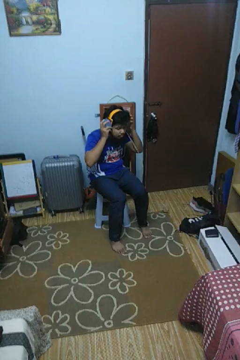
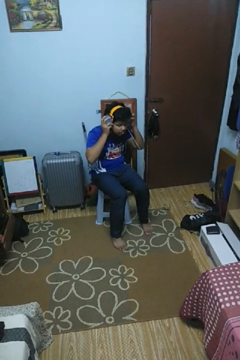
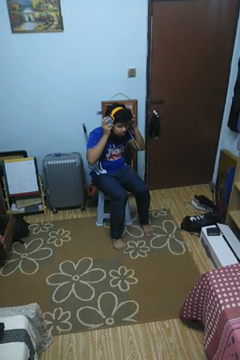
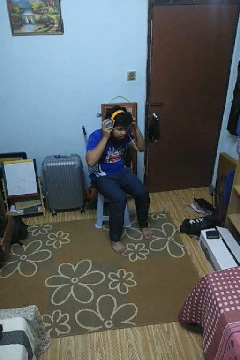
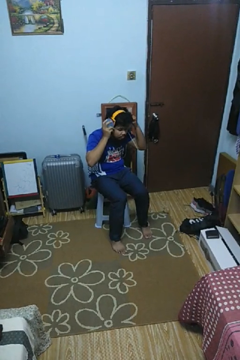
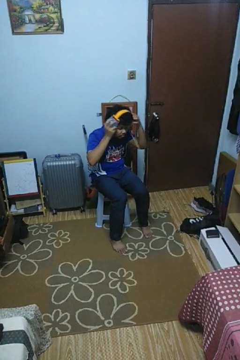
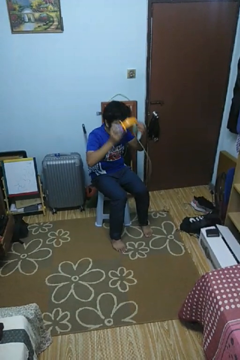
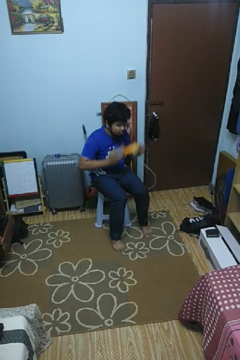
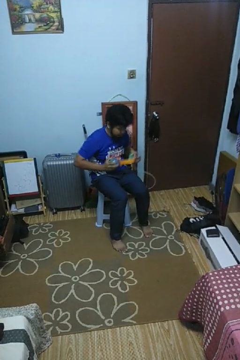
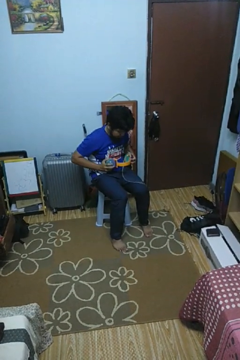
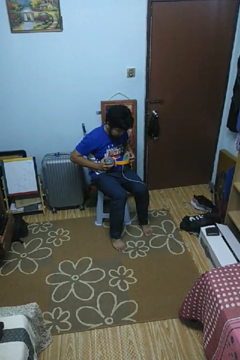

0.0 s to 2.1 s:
person takes off headphones

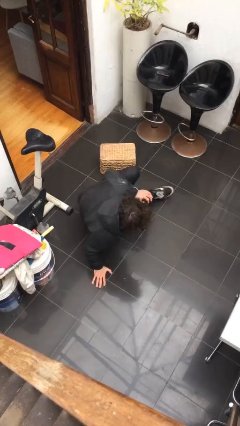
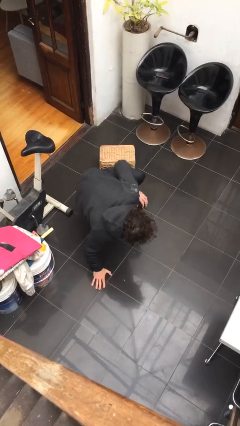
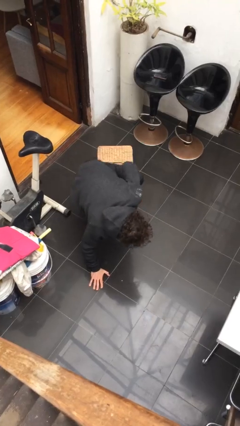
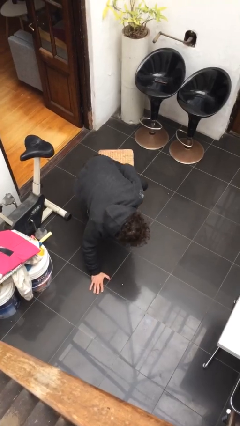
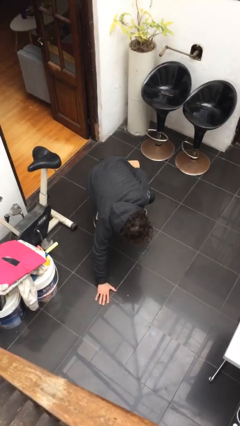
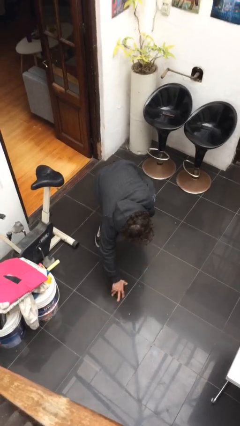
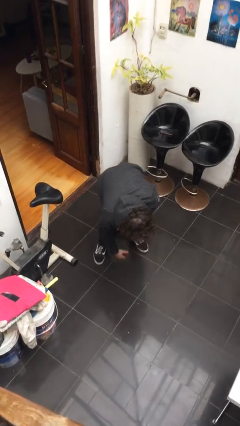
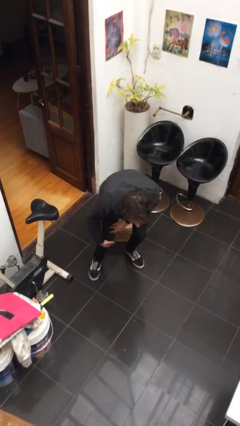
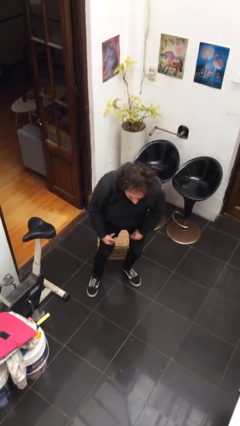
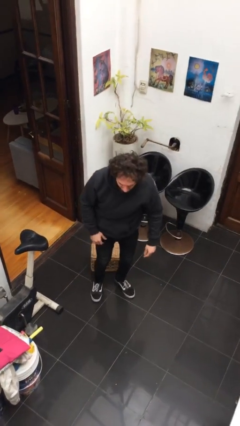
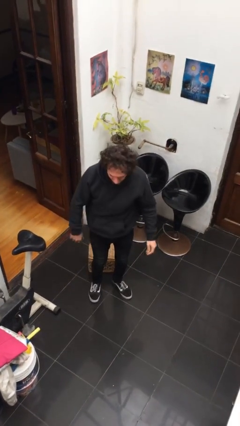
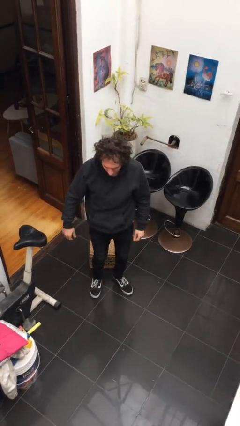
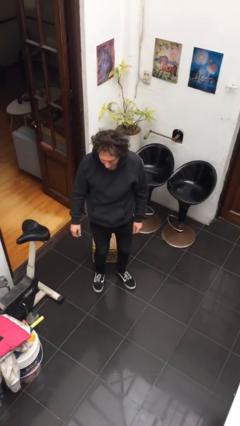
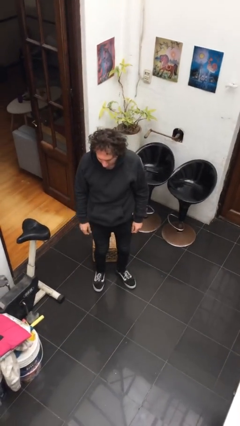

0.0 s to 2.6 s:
person stands up from floor

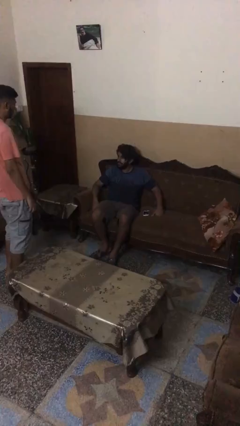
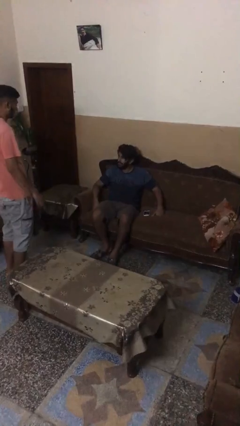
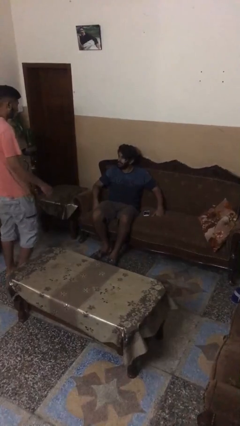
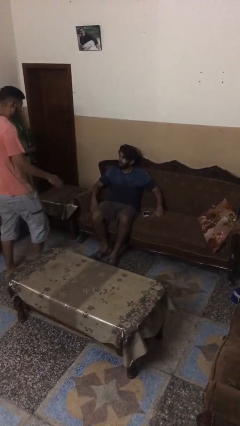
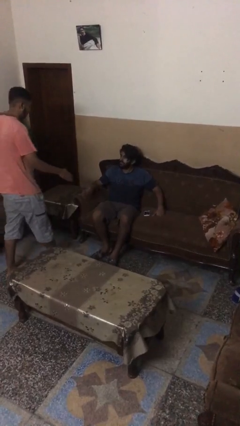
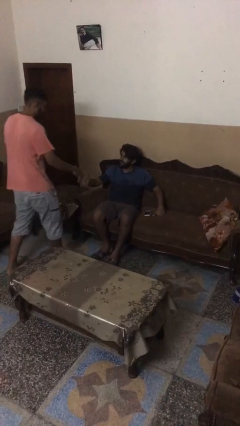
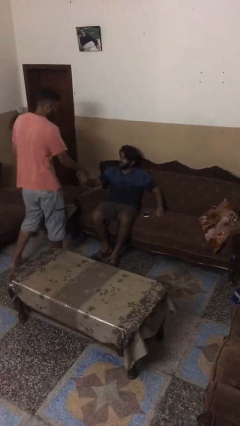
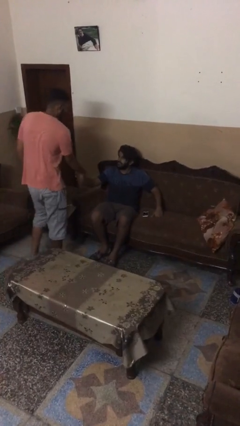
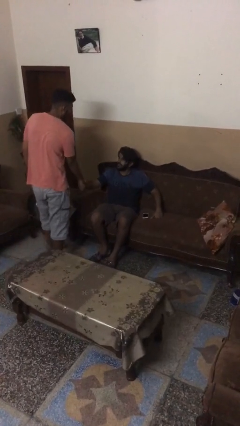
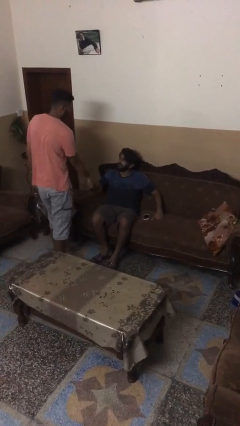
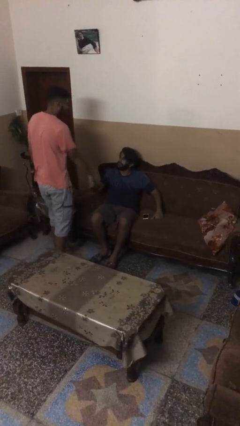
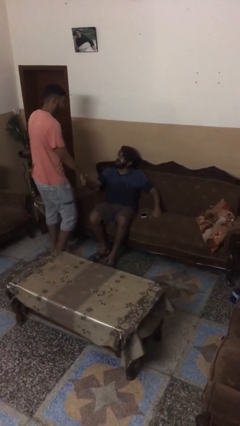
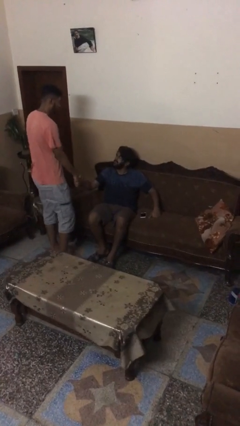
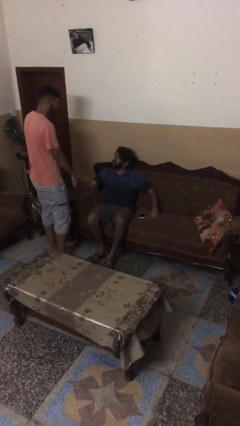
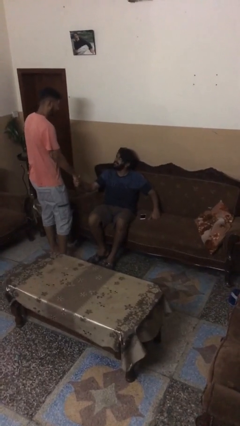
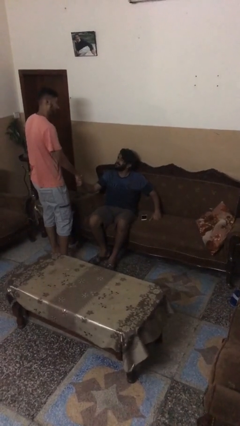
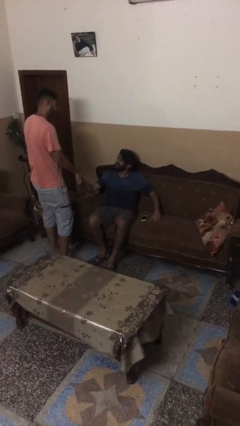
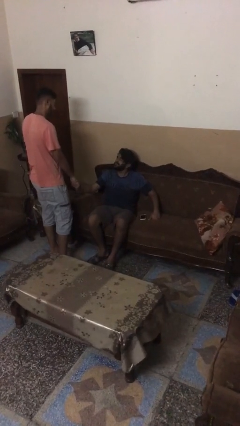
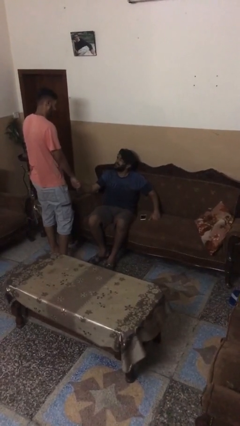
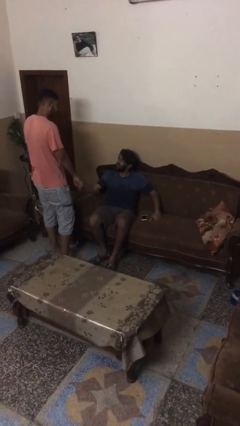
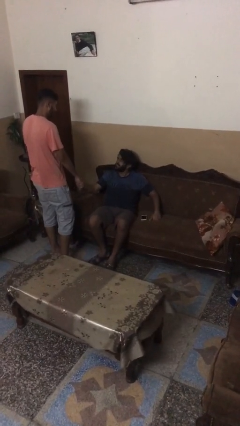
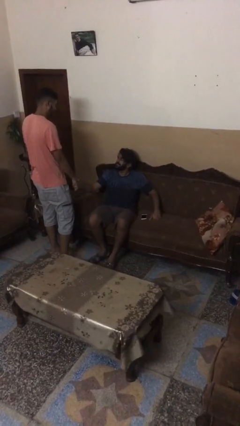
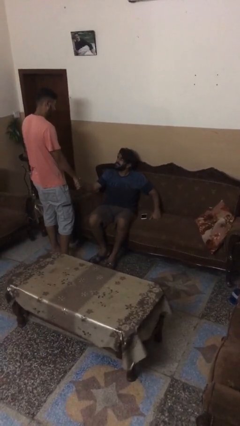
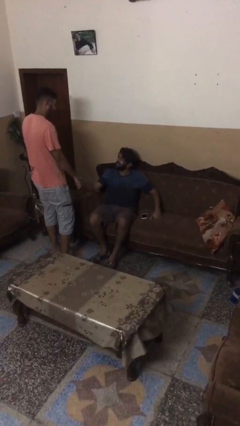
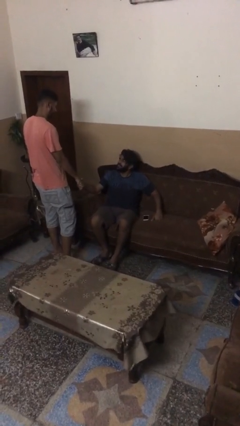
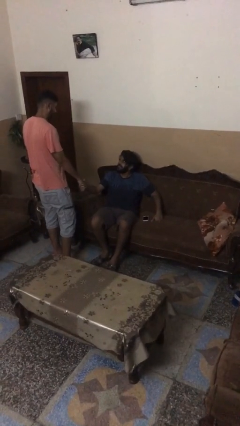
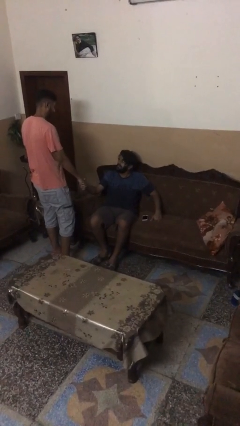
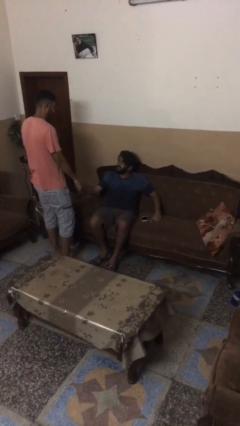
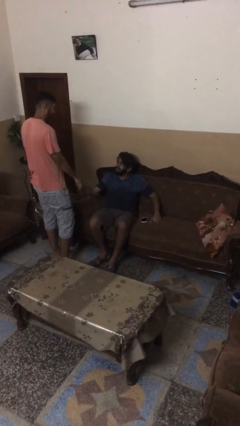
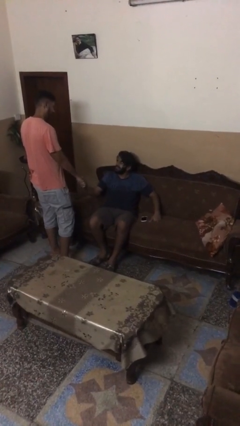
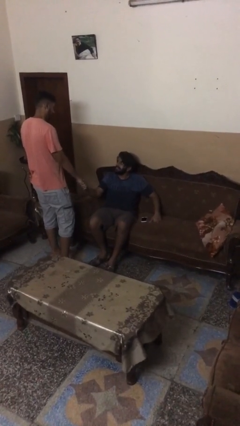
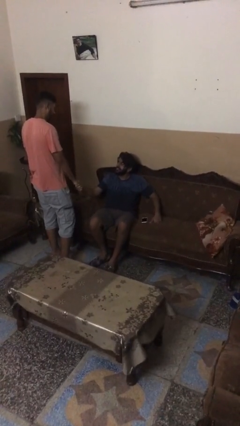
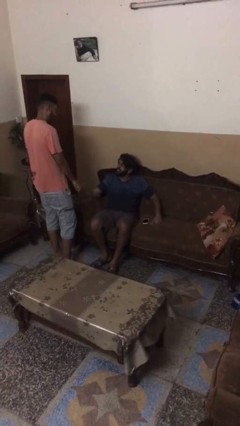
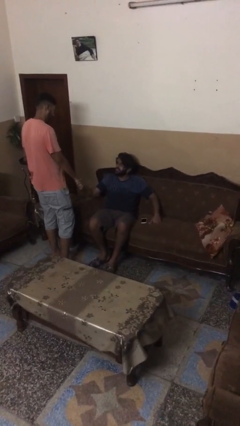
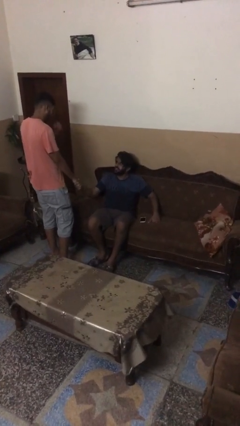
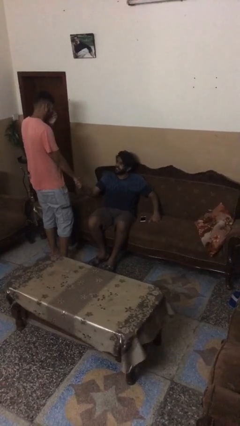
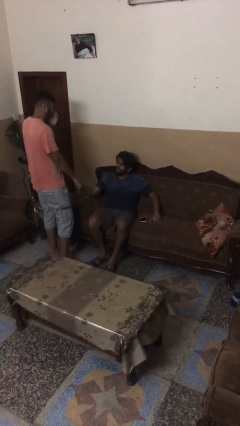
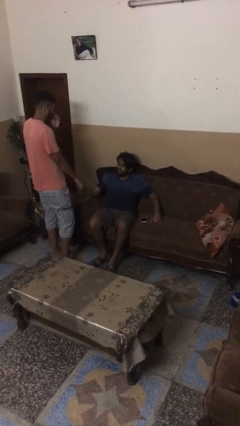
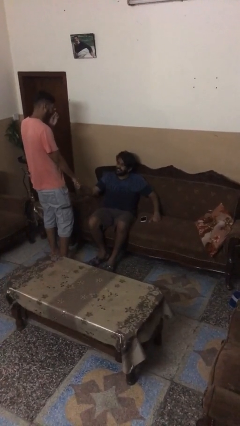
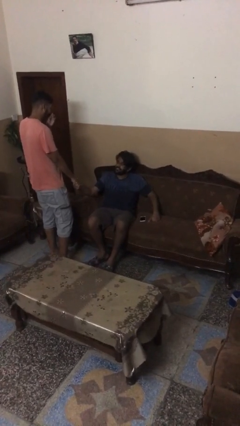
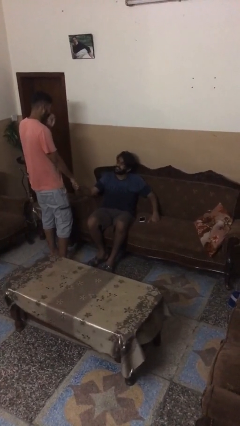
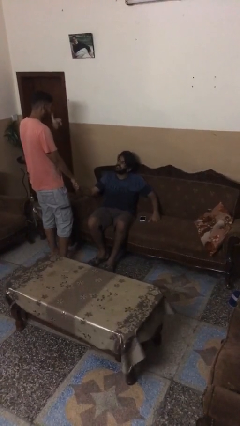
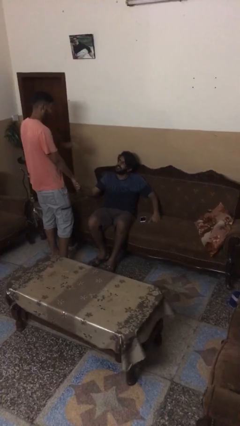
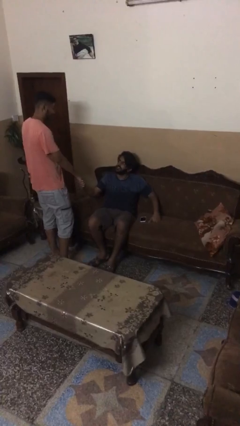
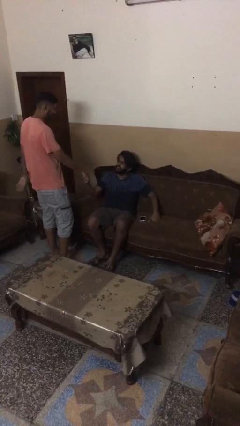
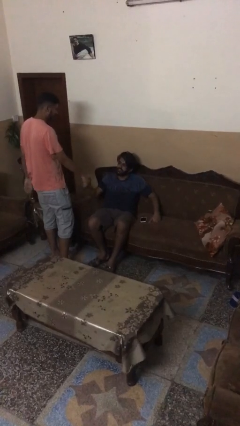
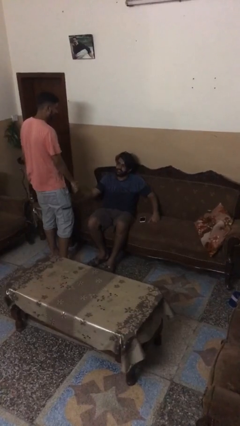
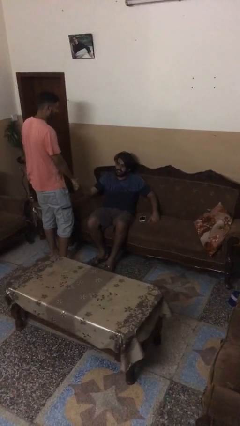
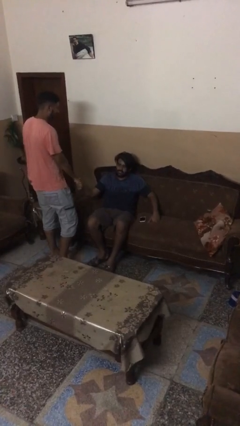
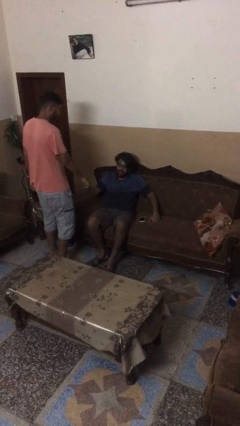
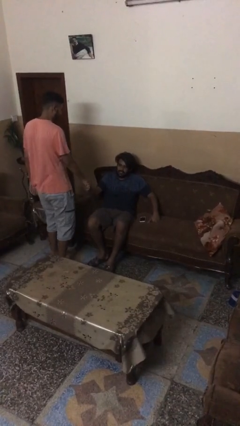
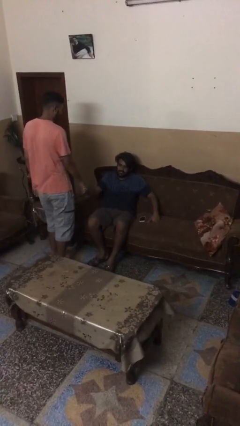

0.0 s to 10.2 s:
person shakes hand

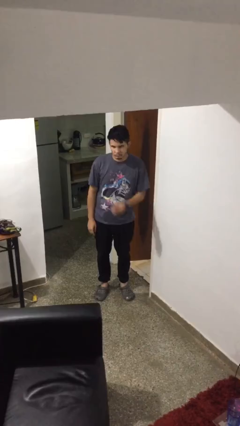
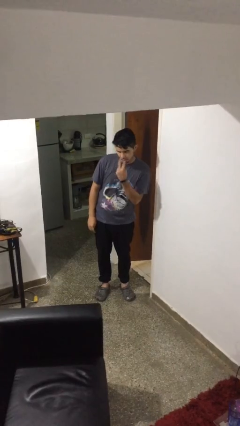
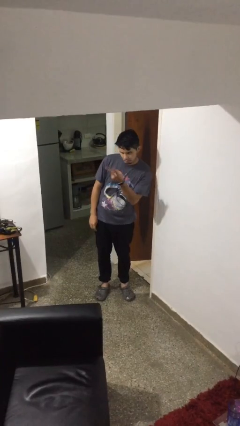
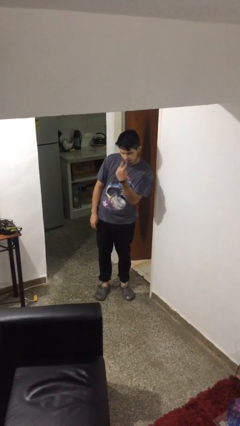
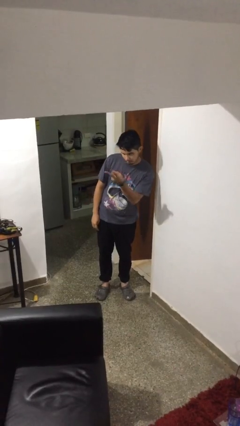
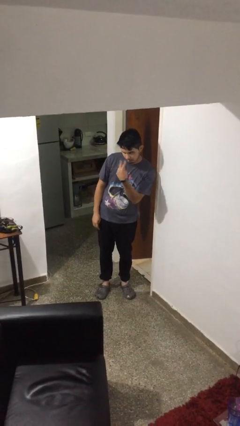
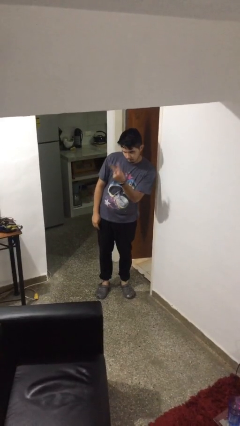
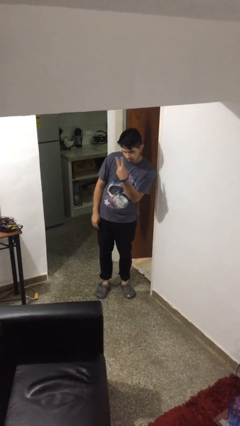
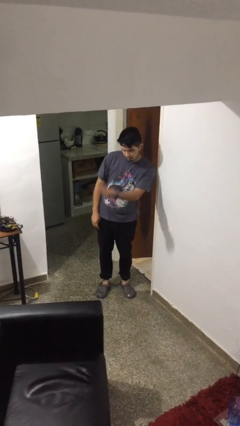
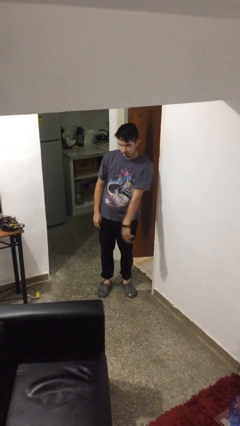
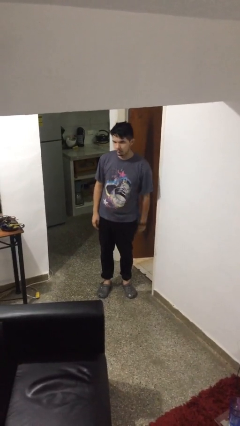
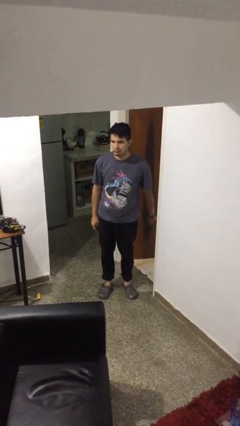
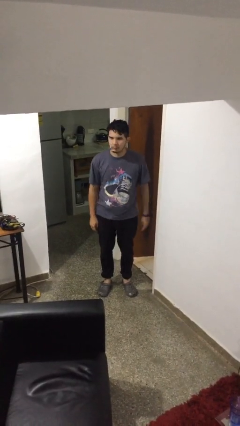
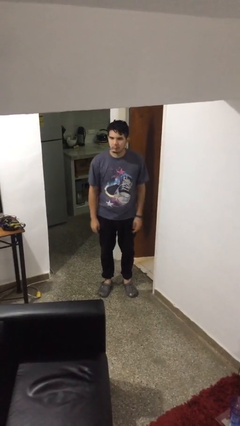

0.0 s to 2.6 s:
person gestures watch closely

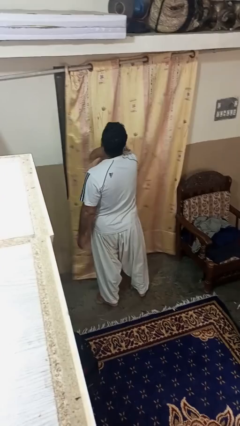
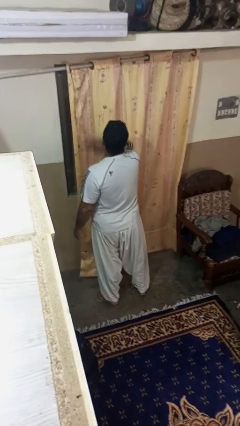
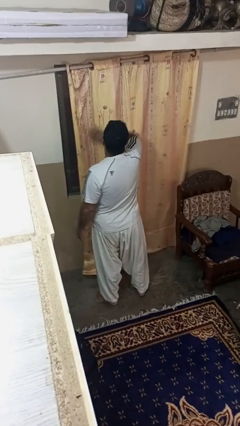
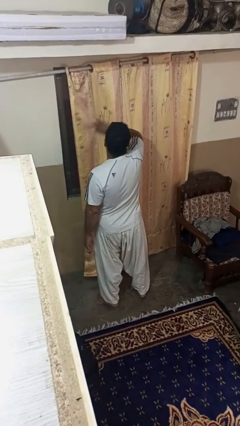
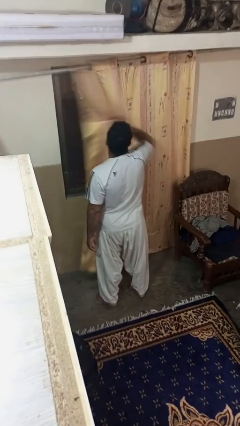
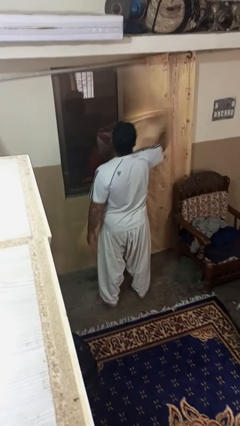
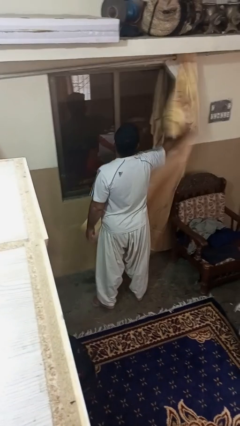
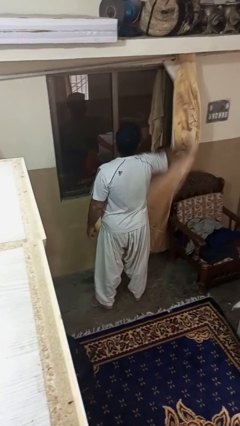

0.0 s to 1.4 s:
person opens curtains
